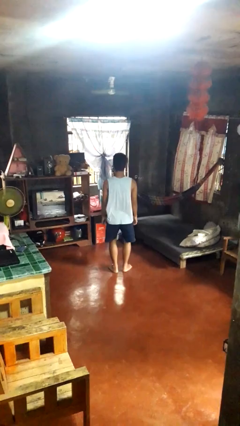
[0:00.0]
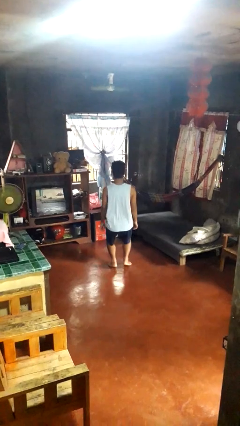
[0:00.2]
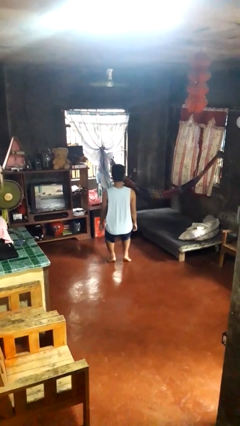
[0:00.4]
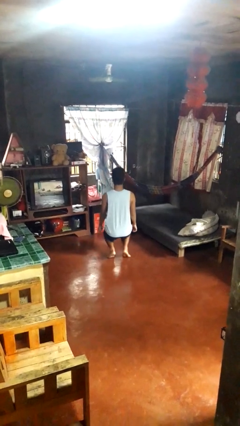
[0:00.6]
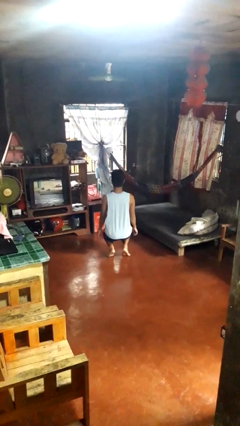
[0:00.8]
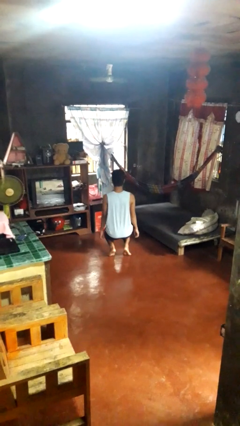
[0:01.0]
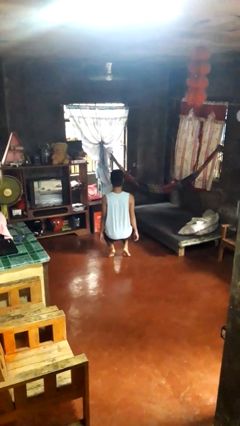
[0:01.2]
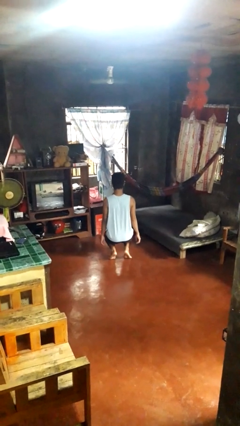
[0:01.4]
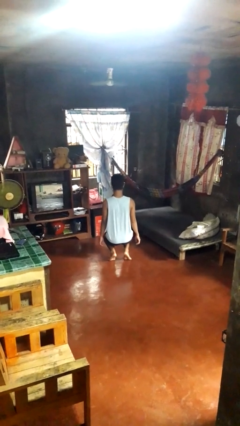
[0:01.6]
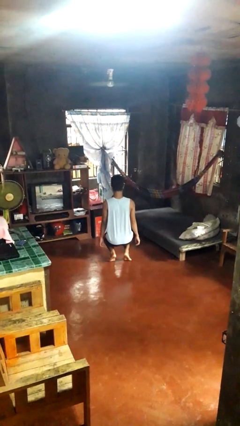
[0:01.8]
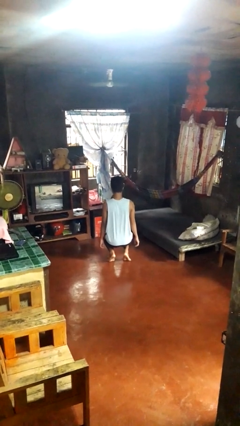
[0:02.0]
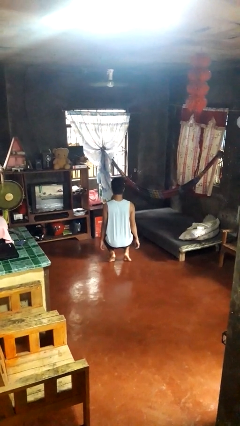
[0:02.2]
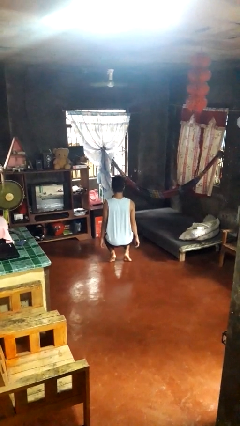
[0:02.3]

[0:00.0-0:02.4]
person squats

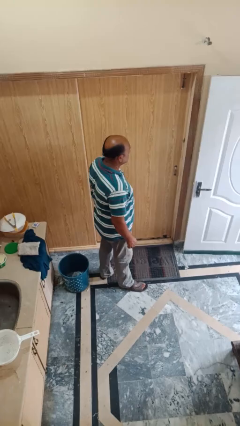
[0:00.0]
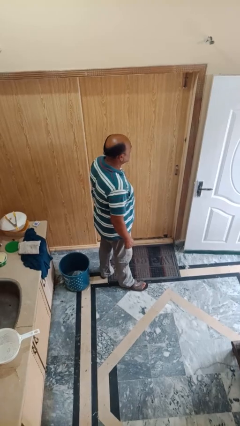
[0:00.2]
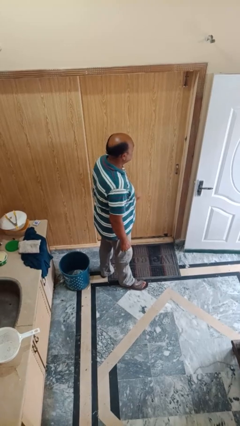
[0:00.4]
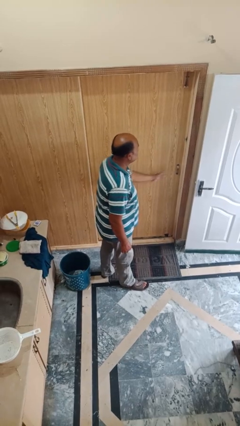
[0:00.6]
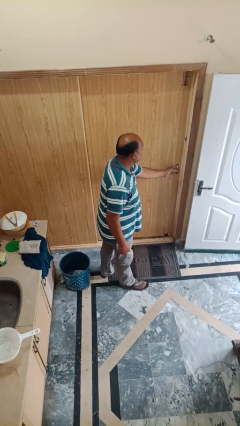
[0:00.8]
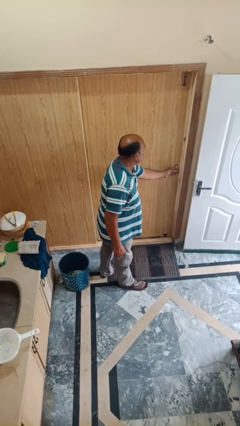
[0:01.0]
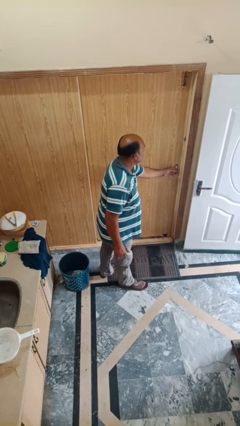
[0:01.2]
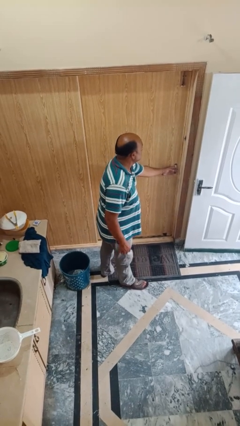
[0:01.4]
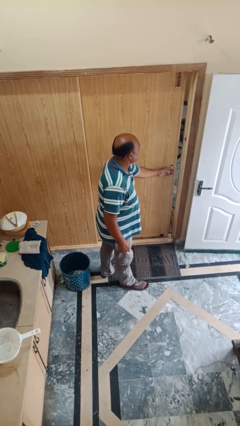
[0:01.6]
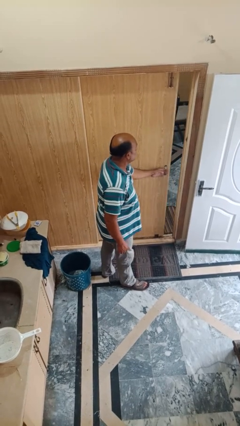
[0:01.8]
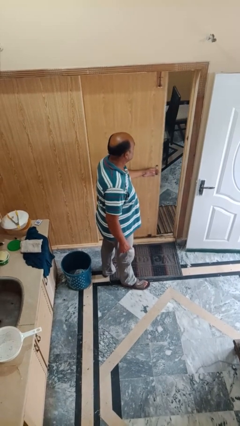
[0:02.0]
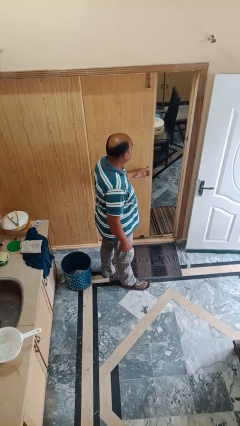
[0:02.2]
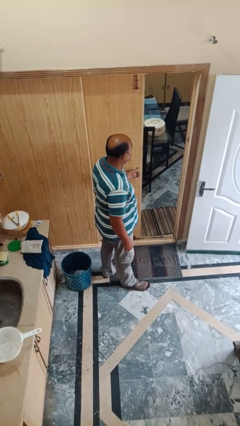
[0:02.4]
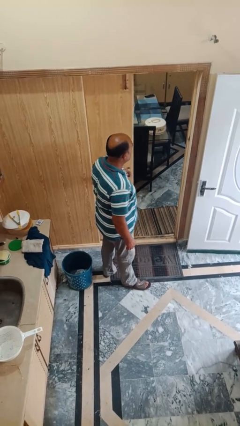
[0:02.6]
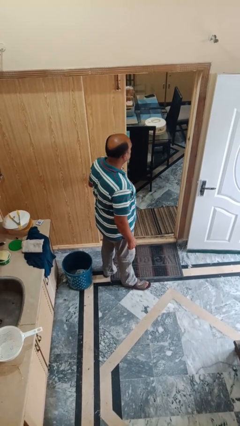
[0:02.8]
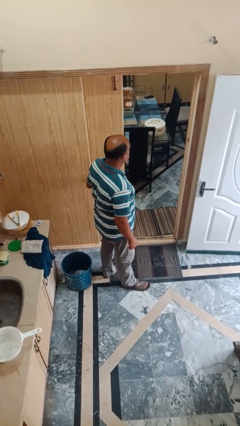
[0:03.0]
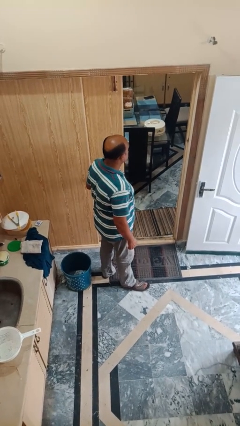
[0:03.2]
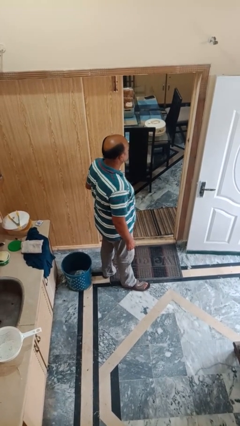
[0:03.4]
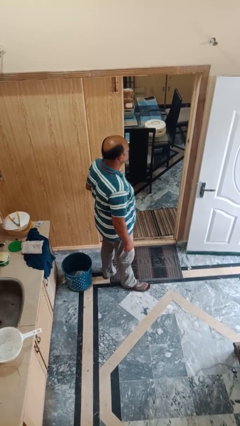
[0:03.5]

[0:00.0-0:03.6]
person opens sliding door

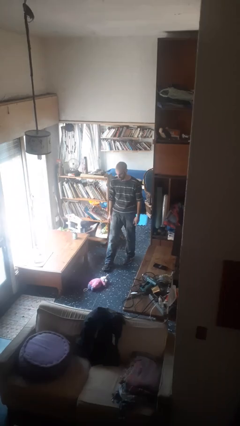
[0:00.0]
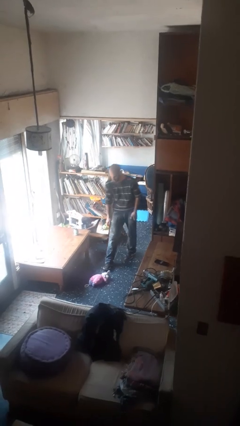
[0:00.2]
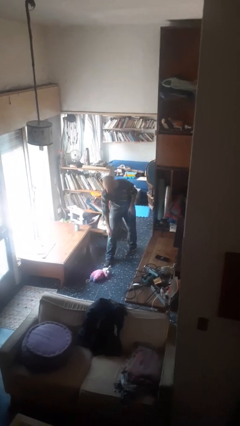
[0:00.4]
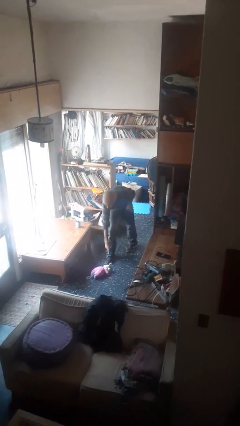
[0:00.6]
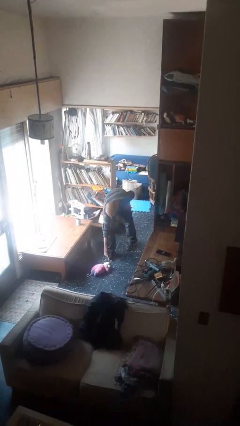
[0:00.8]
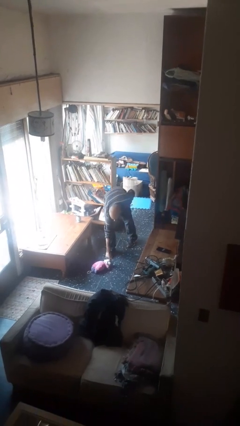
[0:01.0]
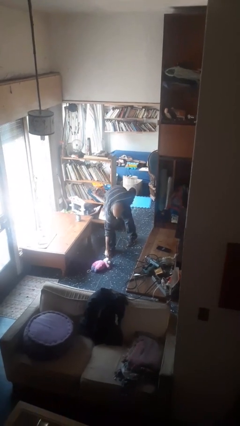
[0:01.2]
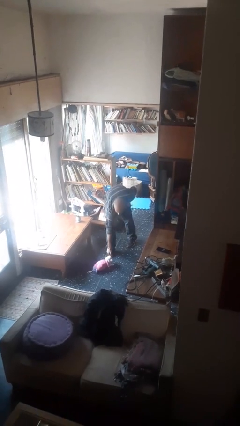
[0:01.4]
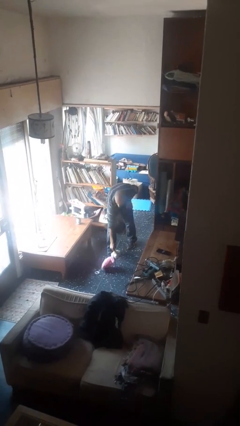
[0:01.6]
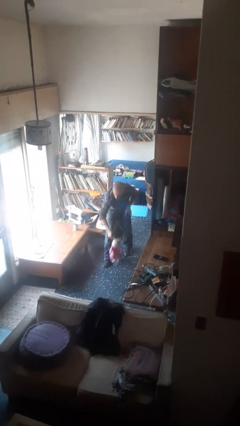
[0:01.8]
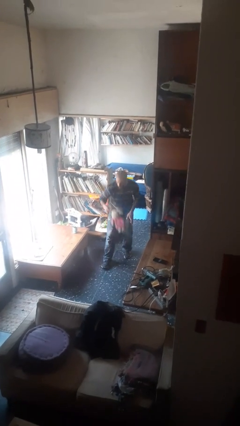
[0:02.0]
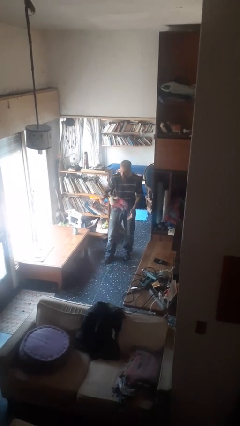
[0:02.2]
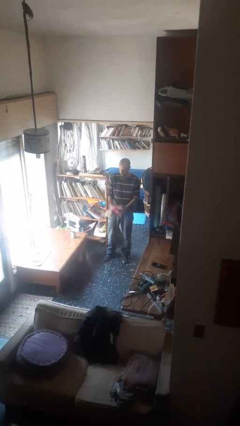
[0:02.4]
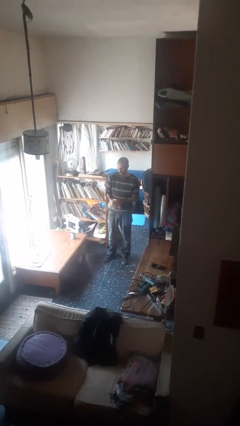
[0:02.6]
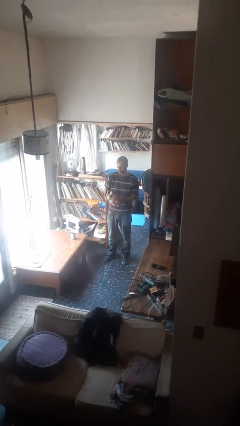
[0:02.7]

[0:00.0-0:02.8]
person picks up object from floor

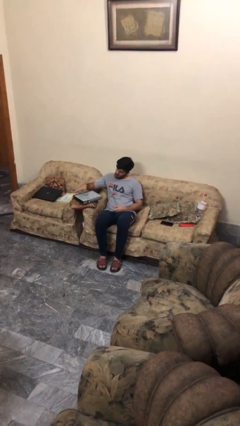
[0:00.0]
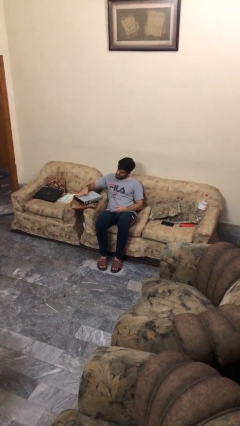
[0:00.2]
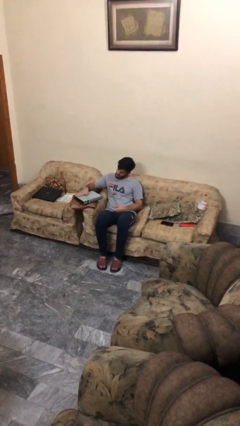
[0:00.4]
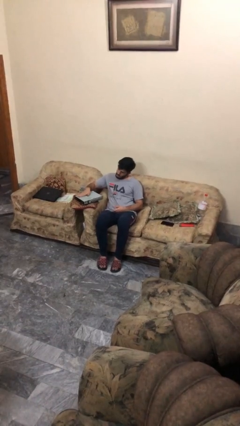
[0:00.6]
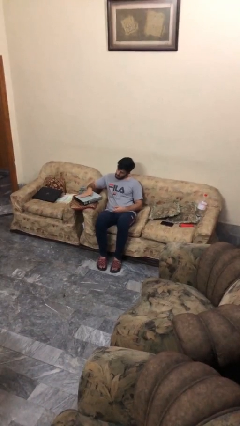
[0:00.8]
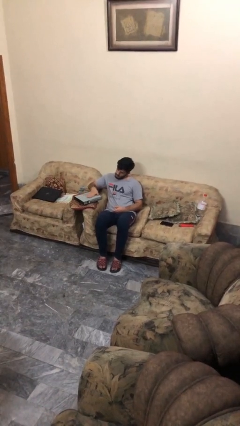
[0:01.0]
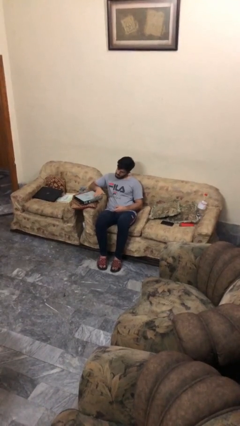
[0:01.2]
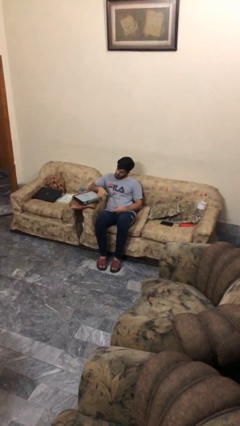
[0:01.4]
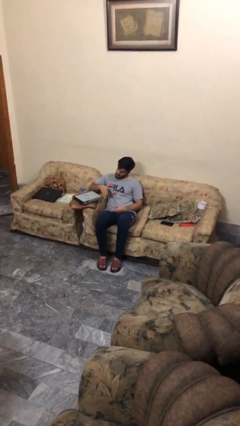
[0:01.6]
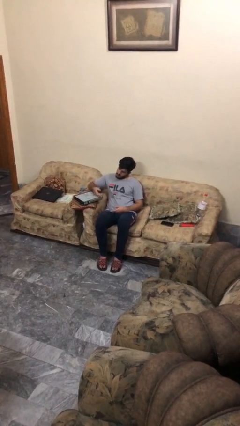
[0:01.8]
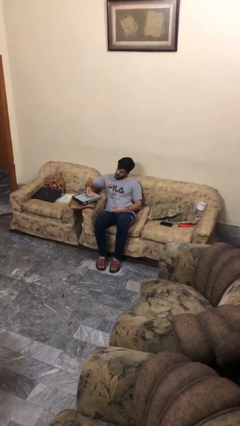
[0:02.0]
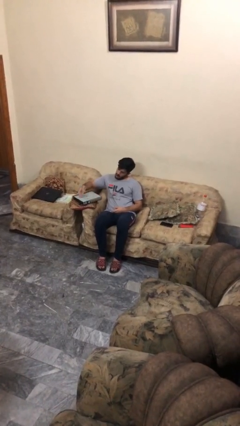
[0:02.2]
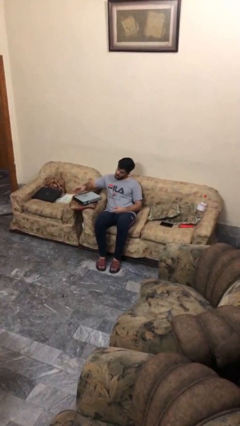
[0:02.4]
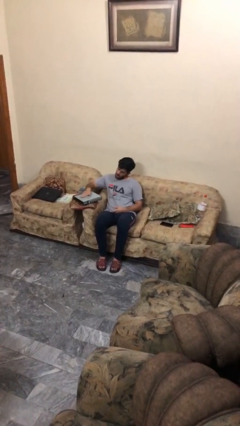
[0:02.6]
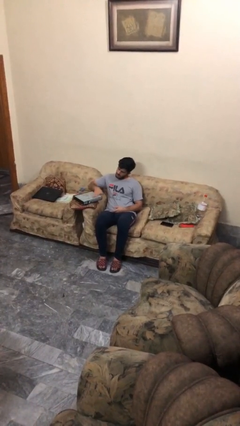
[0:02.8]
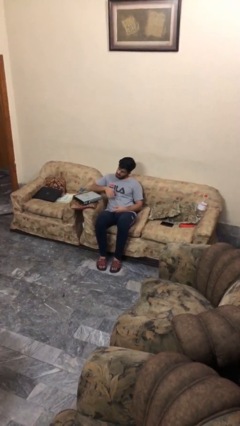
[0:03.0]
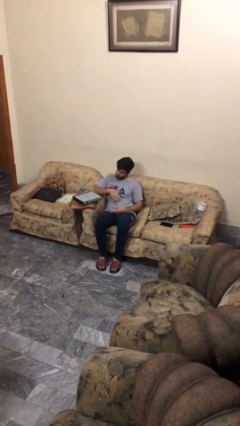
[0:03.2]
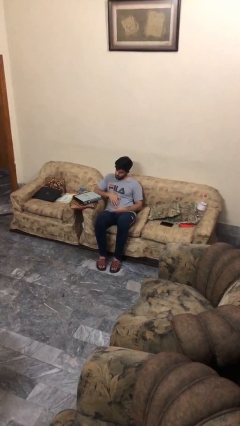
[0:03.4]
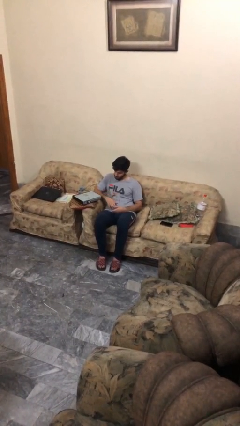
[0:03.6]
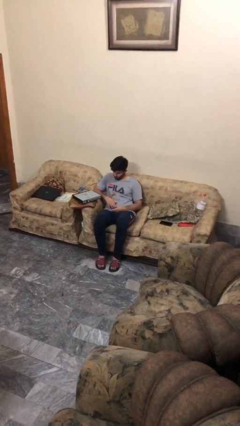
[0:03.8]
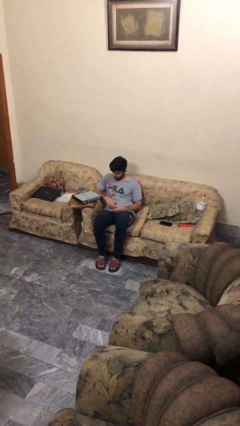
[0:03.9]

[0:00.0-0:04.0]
person waves hand over object

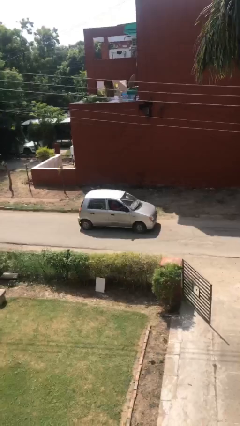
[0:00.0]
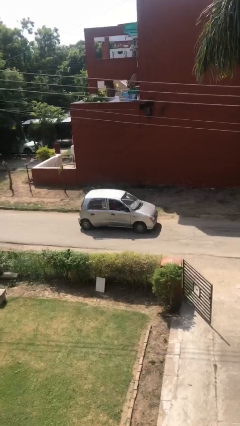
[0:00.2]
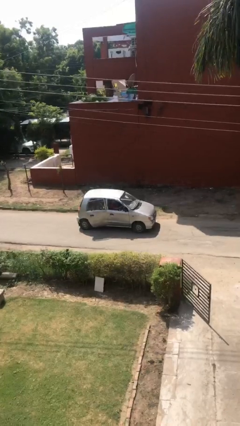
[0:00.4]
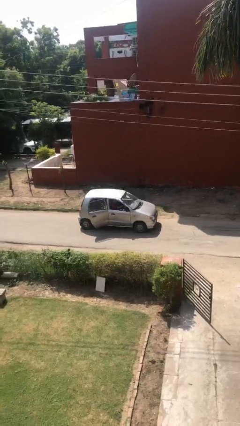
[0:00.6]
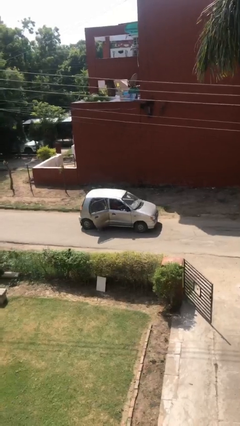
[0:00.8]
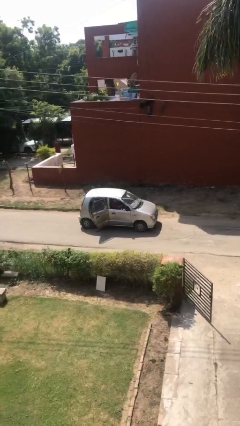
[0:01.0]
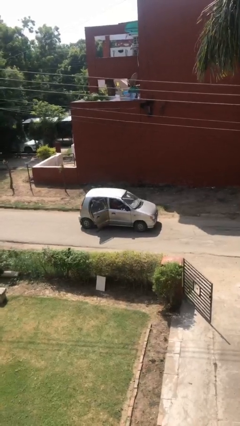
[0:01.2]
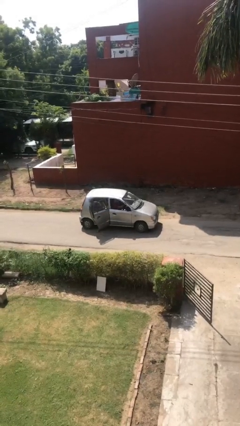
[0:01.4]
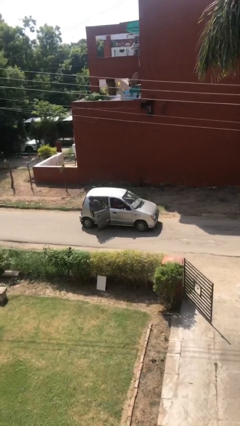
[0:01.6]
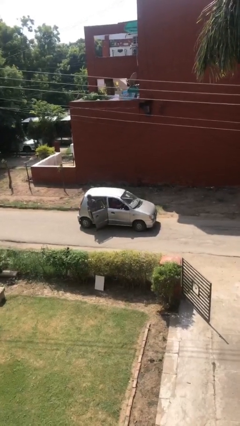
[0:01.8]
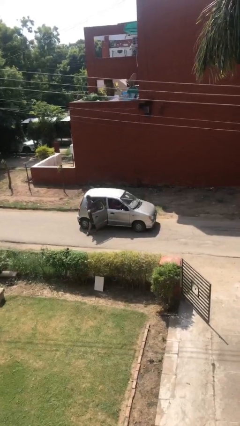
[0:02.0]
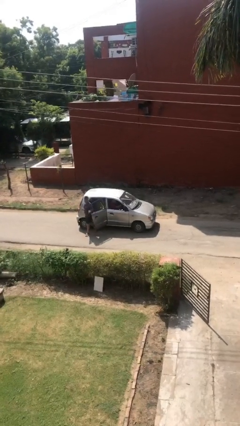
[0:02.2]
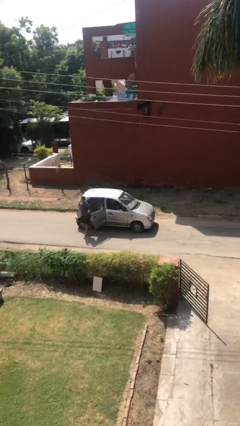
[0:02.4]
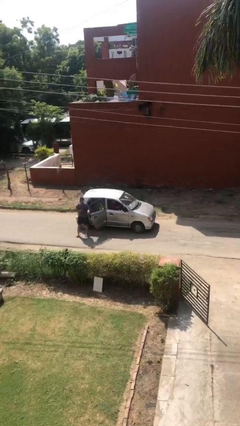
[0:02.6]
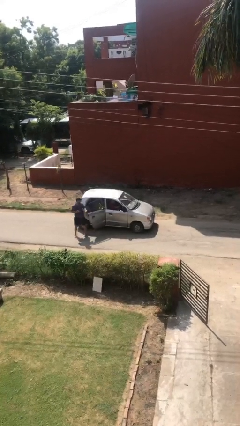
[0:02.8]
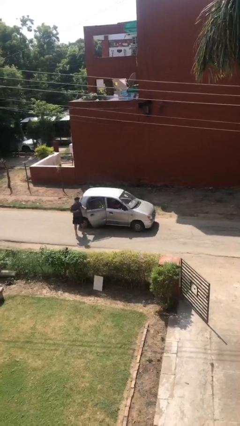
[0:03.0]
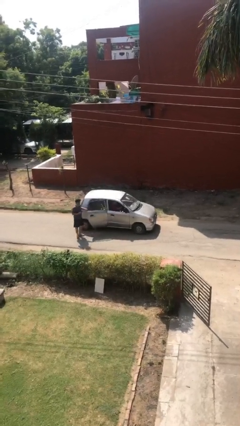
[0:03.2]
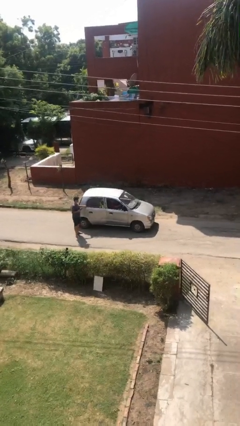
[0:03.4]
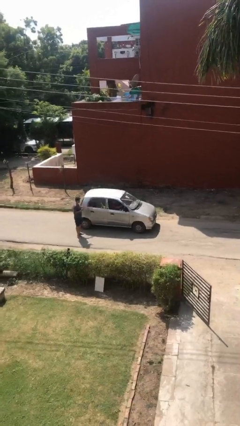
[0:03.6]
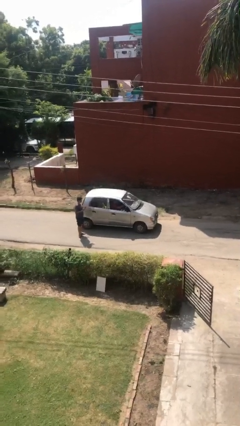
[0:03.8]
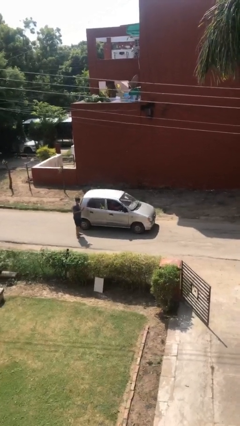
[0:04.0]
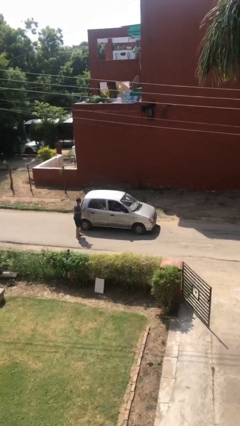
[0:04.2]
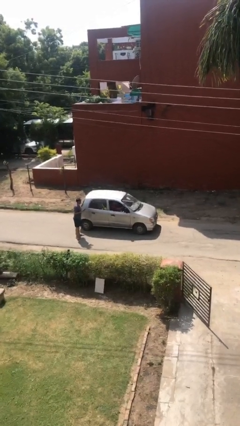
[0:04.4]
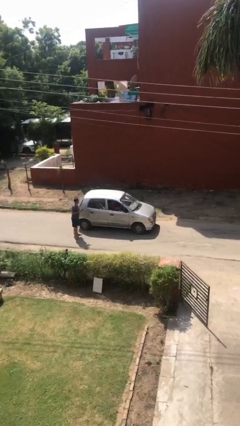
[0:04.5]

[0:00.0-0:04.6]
car drops off person
